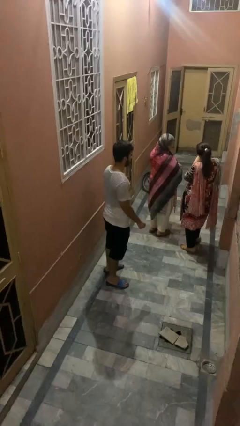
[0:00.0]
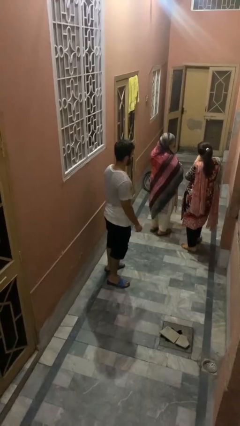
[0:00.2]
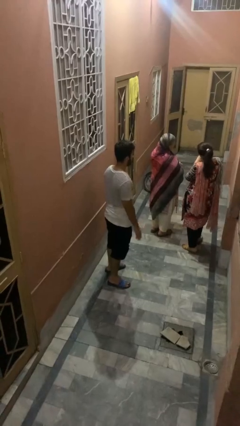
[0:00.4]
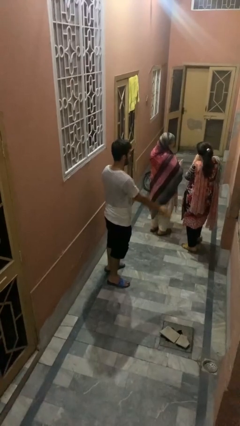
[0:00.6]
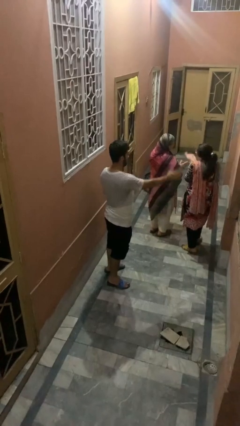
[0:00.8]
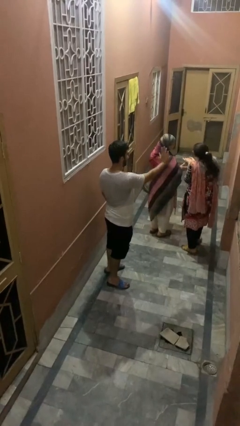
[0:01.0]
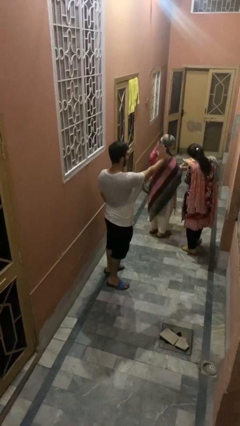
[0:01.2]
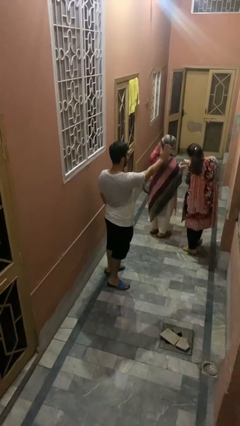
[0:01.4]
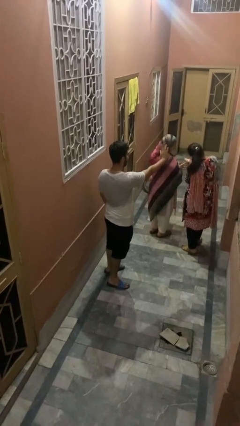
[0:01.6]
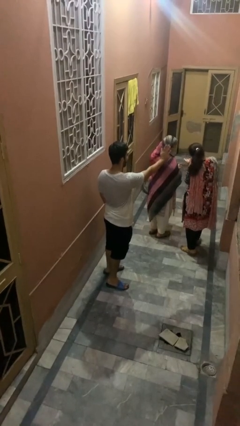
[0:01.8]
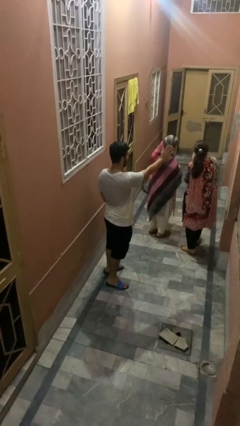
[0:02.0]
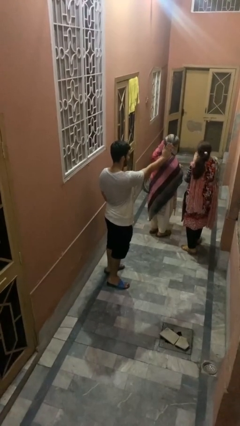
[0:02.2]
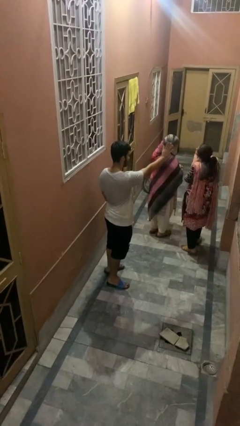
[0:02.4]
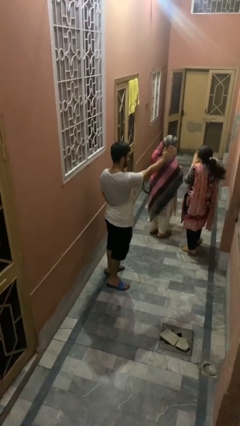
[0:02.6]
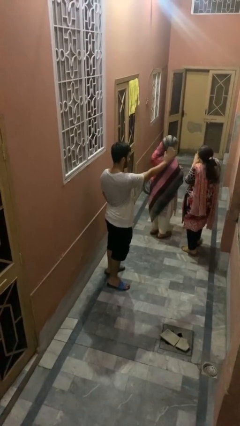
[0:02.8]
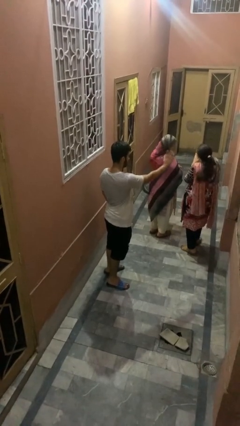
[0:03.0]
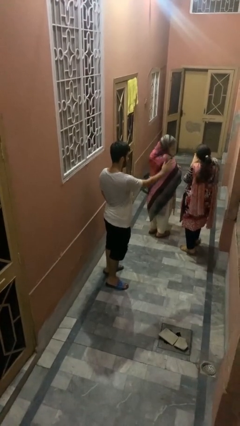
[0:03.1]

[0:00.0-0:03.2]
person waves at person

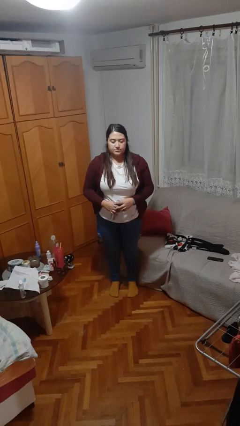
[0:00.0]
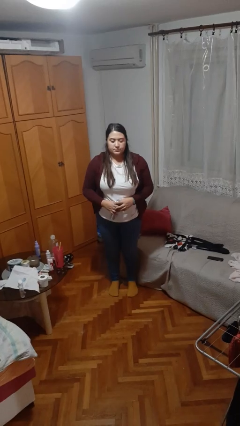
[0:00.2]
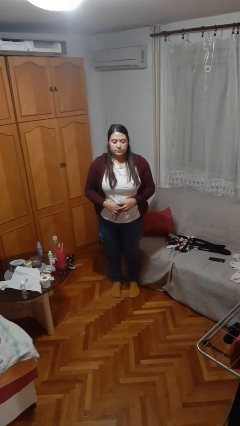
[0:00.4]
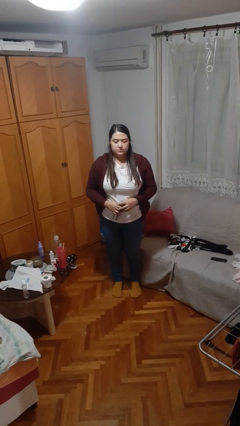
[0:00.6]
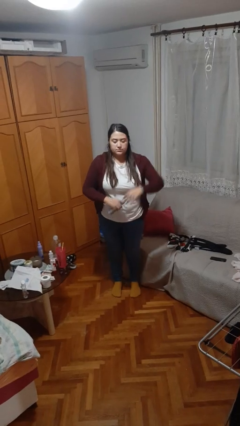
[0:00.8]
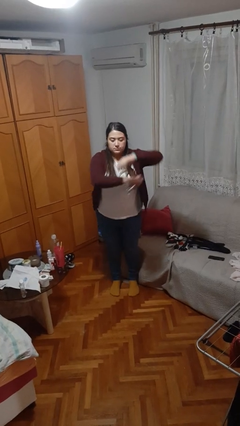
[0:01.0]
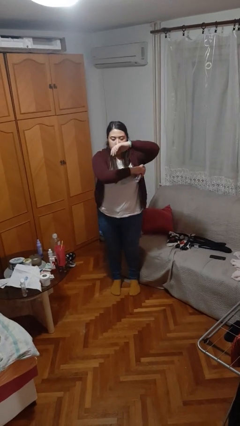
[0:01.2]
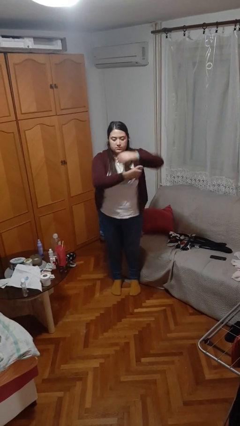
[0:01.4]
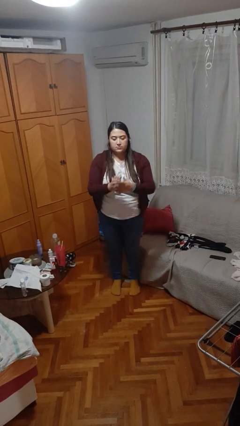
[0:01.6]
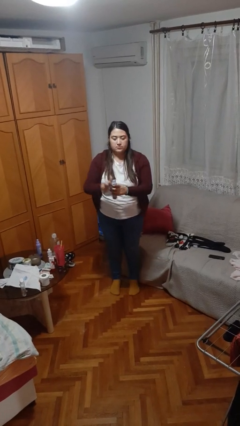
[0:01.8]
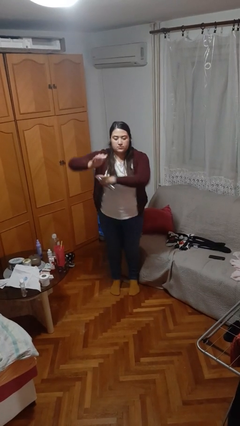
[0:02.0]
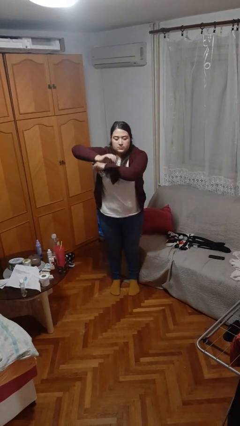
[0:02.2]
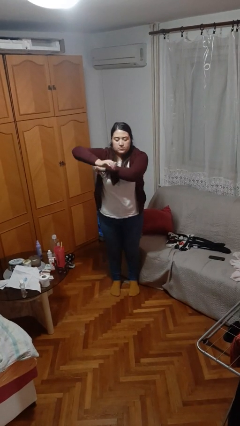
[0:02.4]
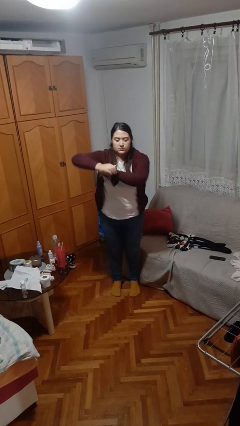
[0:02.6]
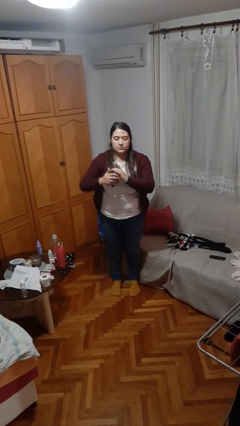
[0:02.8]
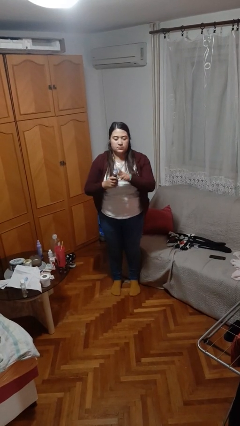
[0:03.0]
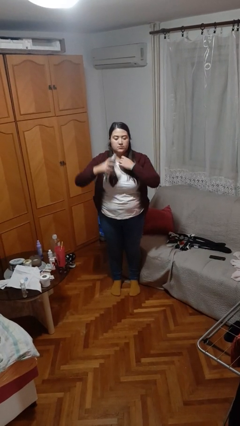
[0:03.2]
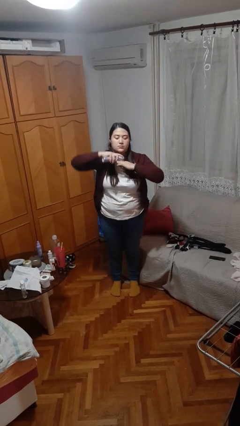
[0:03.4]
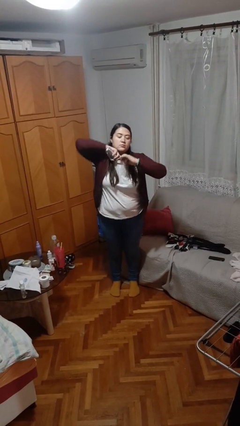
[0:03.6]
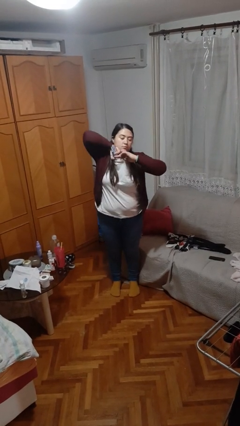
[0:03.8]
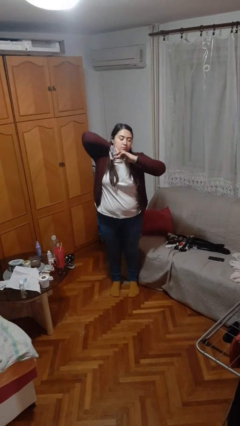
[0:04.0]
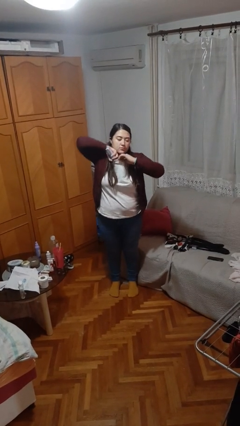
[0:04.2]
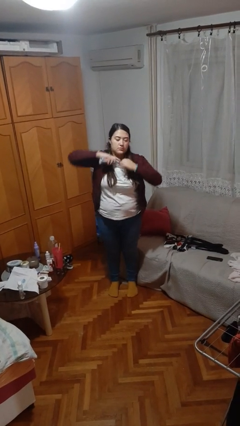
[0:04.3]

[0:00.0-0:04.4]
person applies deodorant

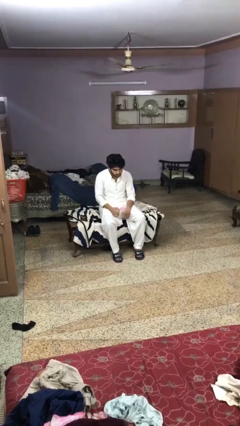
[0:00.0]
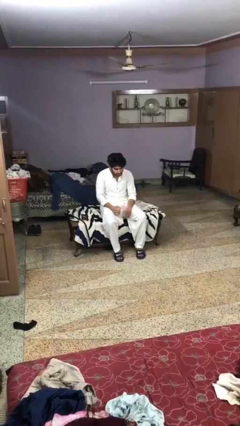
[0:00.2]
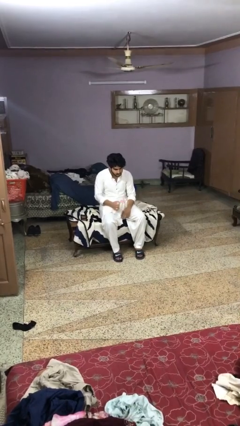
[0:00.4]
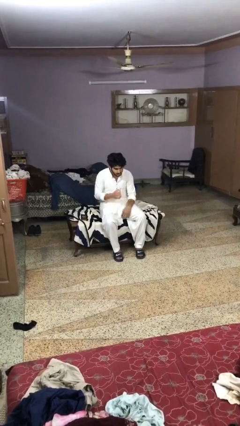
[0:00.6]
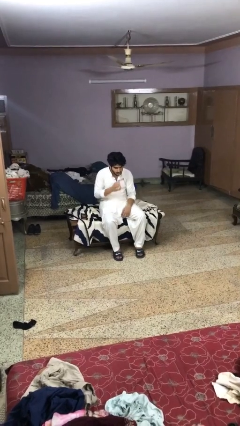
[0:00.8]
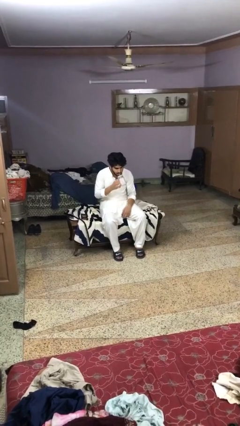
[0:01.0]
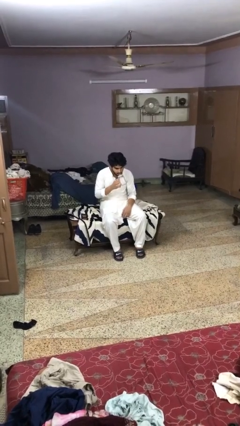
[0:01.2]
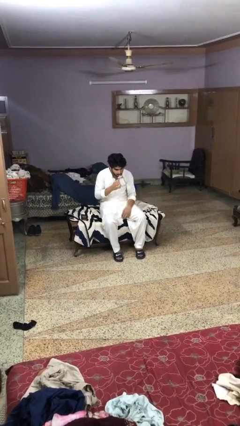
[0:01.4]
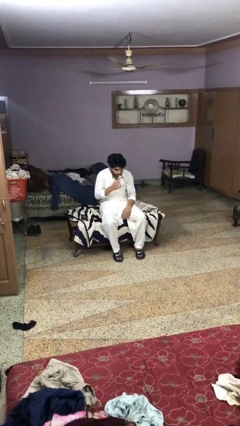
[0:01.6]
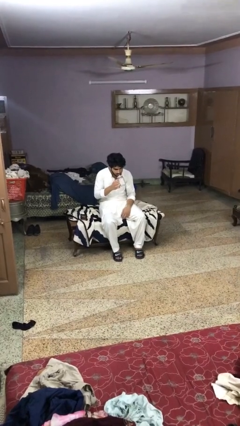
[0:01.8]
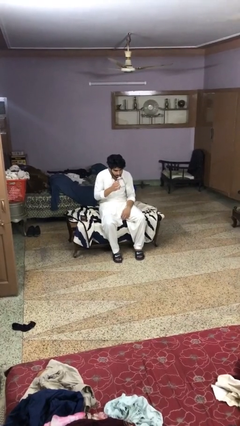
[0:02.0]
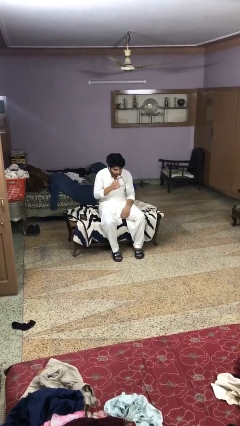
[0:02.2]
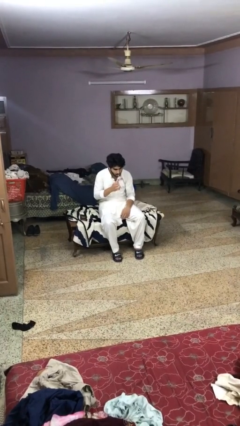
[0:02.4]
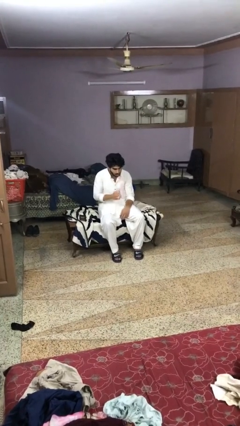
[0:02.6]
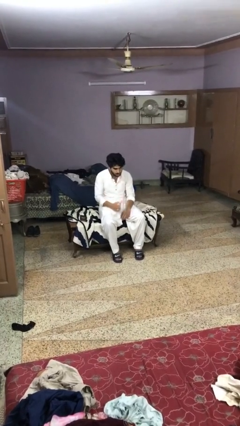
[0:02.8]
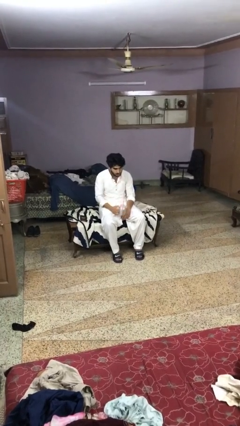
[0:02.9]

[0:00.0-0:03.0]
person drinks from straw

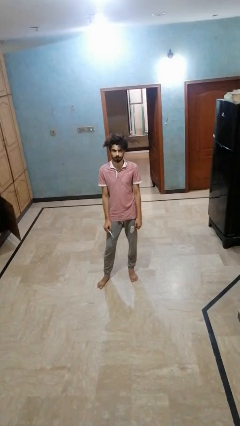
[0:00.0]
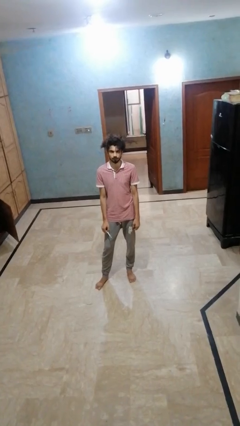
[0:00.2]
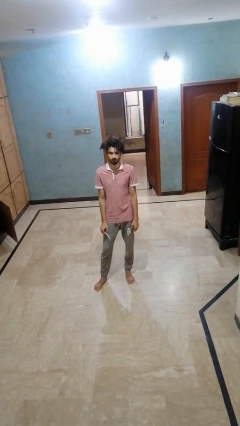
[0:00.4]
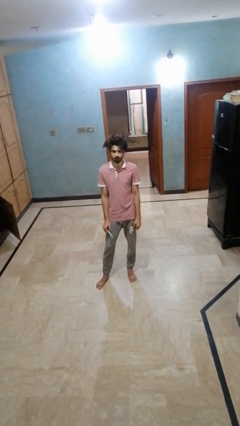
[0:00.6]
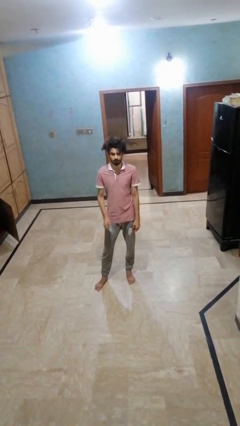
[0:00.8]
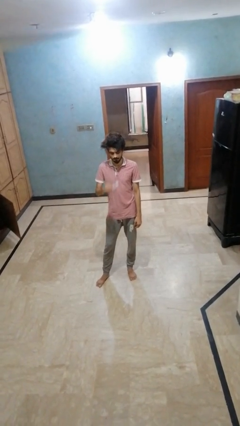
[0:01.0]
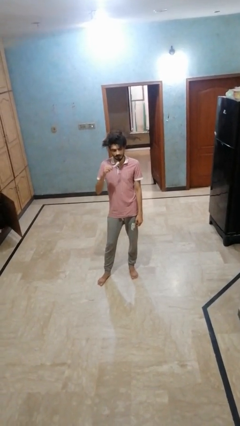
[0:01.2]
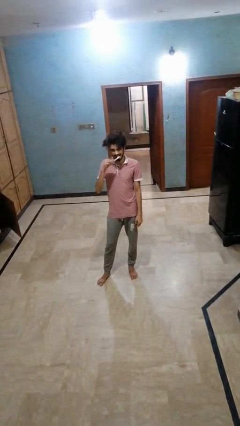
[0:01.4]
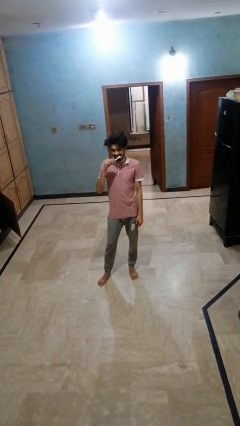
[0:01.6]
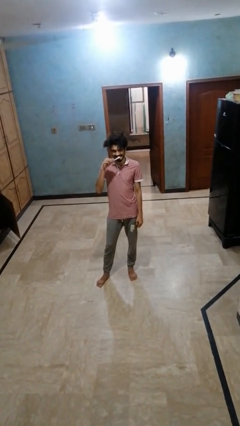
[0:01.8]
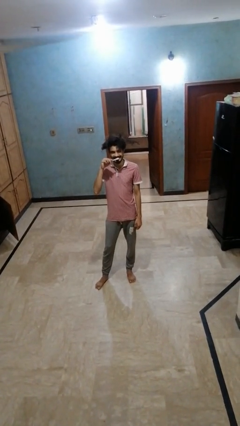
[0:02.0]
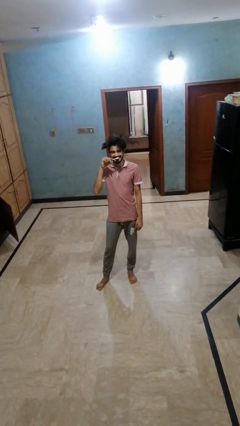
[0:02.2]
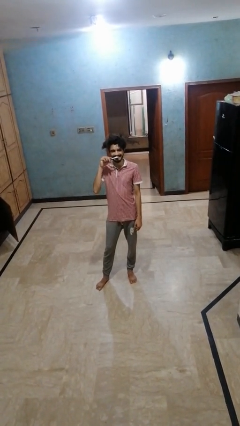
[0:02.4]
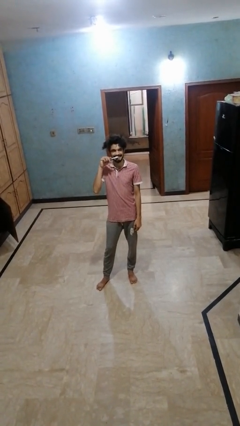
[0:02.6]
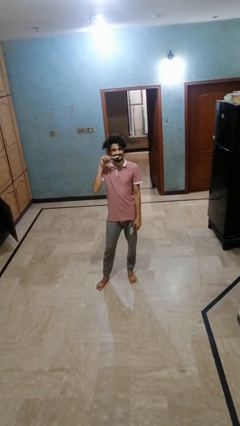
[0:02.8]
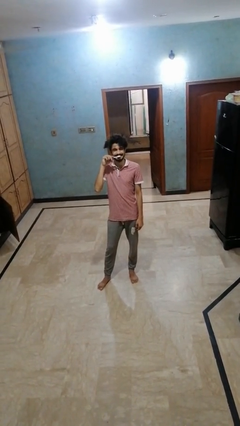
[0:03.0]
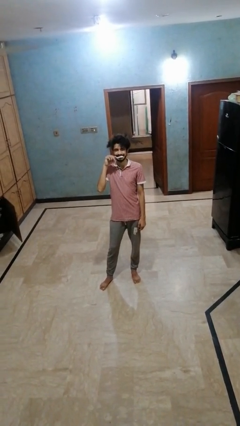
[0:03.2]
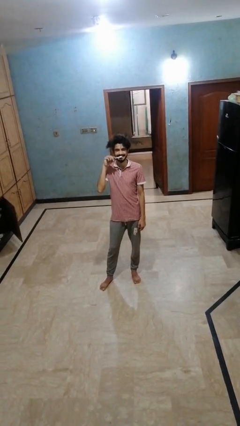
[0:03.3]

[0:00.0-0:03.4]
person brushes teeth

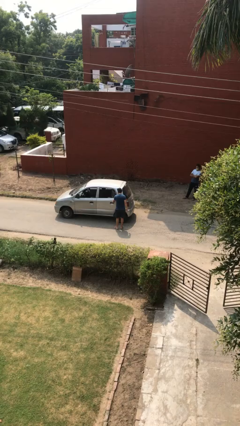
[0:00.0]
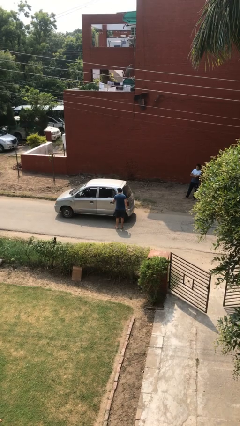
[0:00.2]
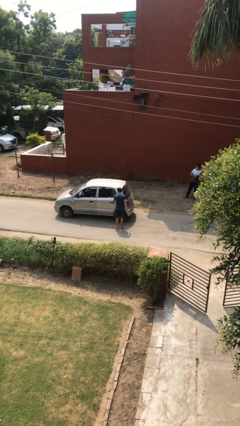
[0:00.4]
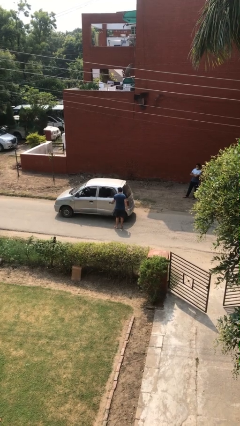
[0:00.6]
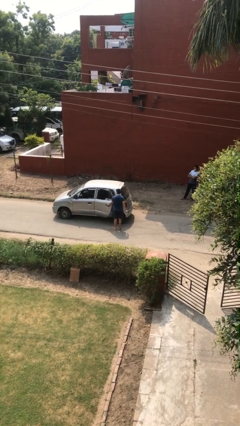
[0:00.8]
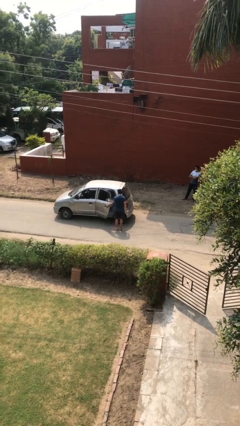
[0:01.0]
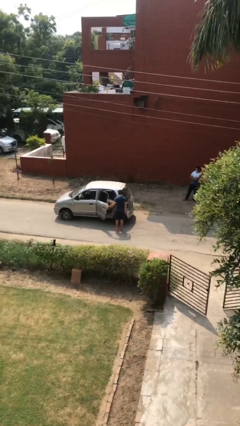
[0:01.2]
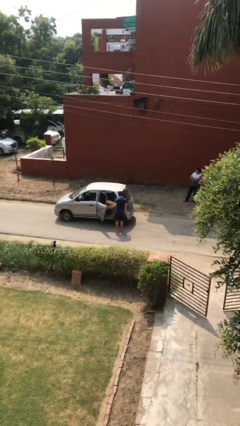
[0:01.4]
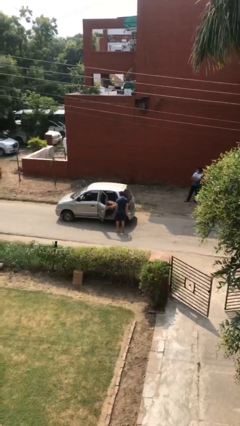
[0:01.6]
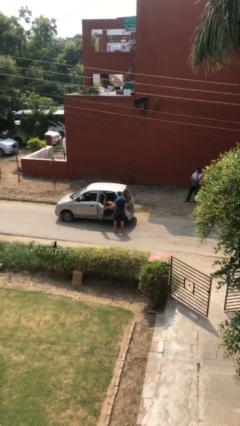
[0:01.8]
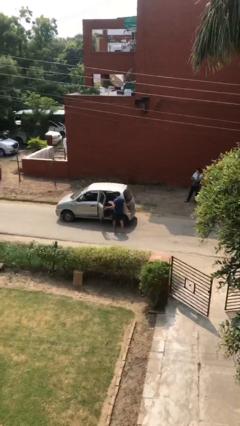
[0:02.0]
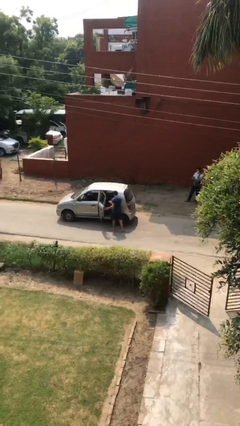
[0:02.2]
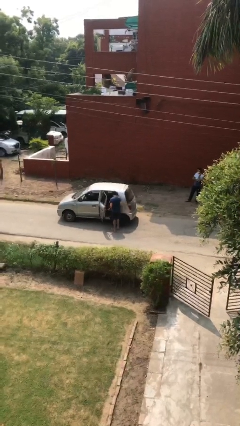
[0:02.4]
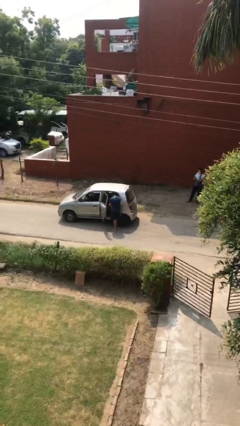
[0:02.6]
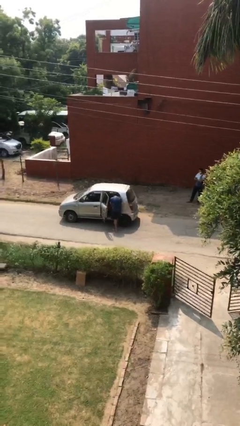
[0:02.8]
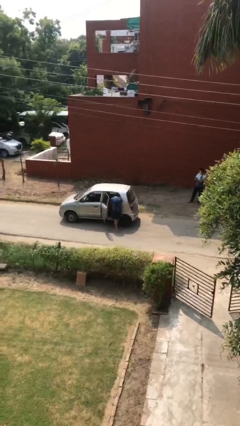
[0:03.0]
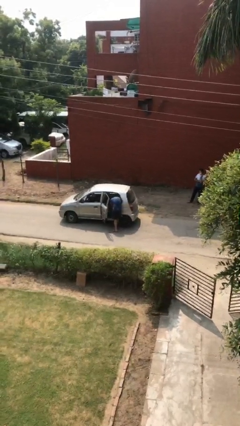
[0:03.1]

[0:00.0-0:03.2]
person opens car door

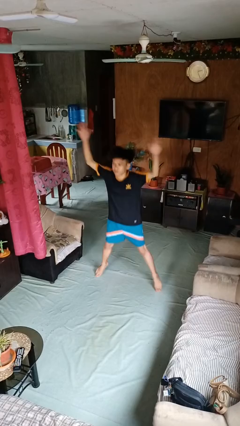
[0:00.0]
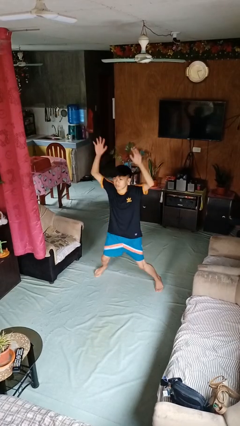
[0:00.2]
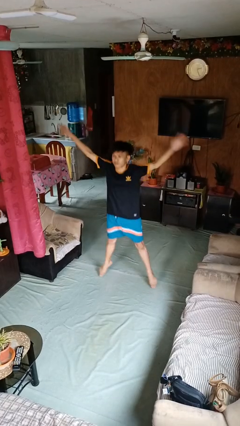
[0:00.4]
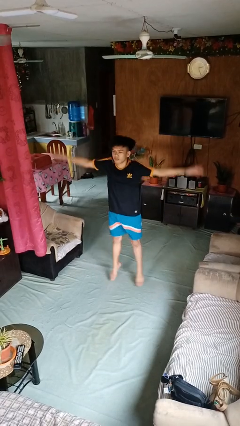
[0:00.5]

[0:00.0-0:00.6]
person exercises with jumping jacks
